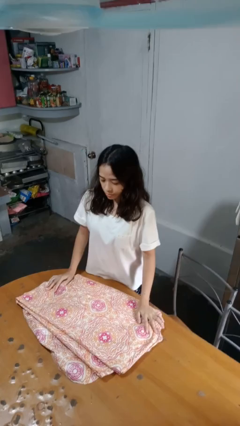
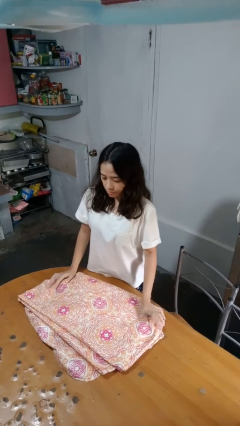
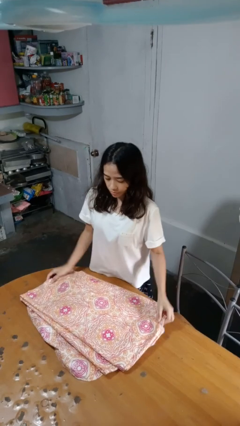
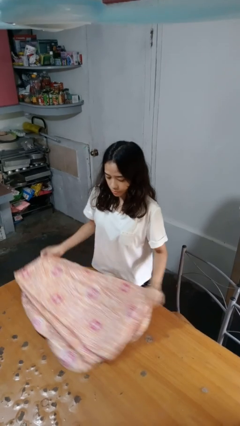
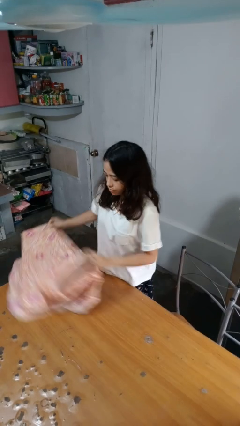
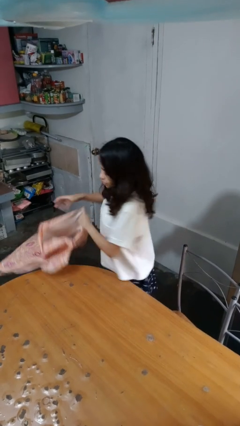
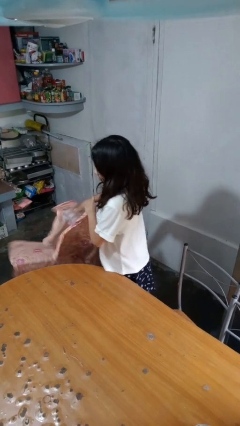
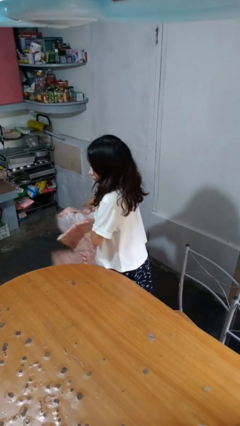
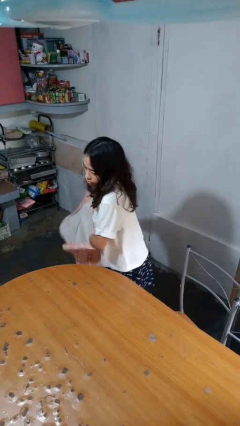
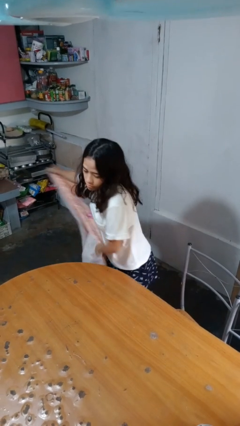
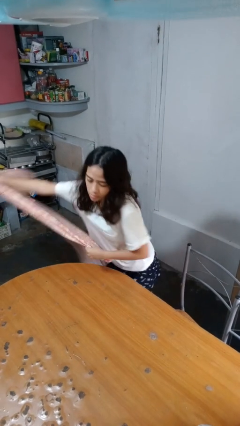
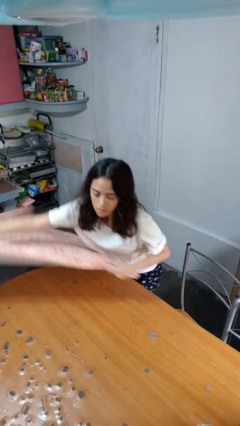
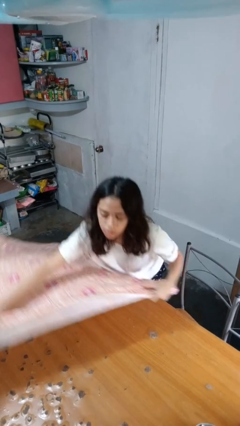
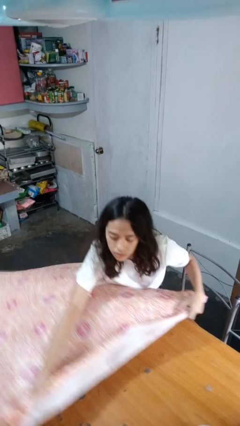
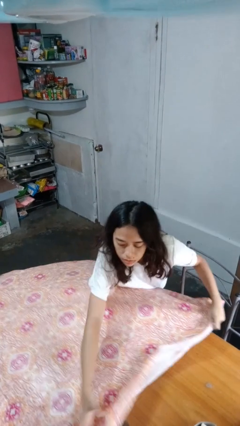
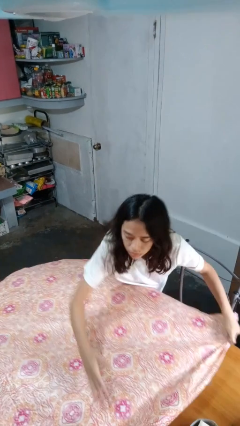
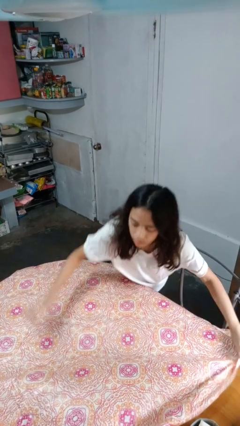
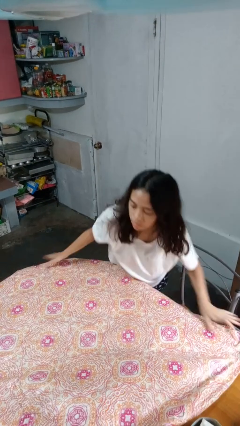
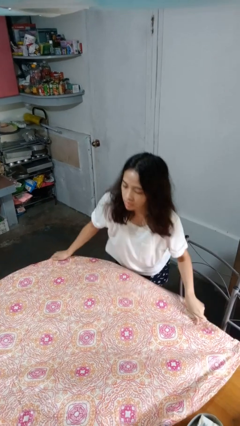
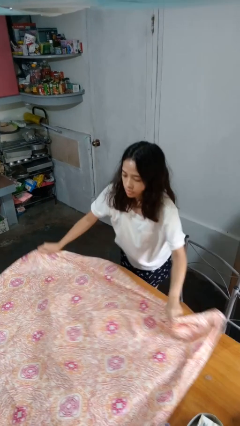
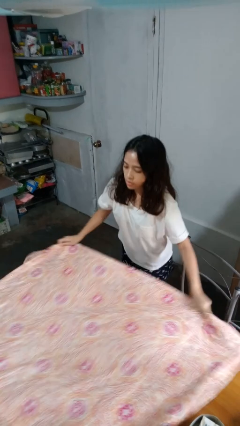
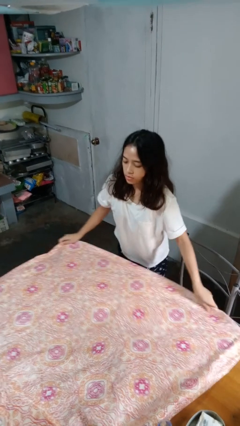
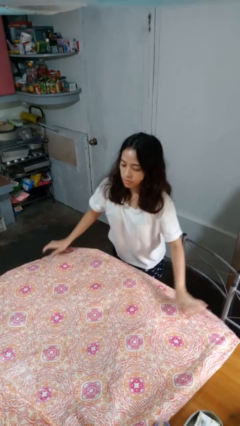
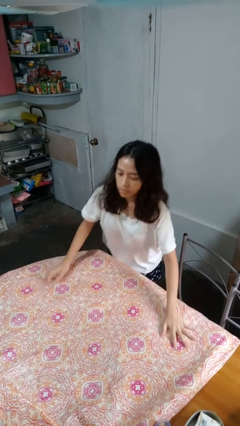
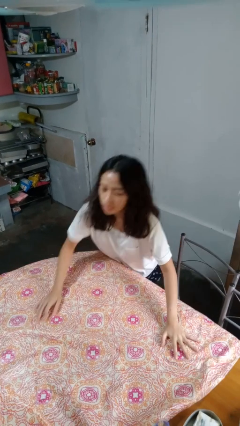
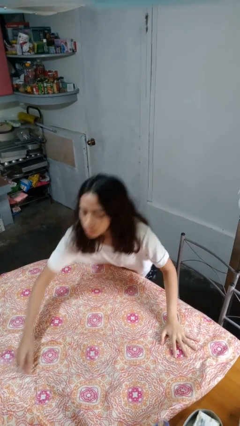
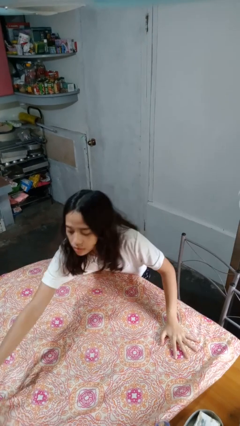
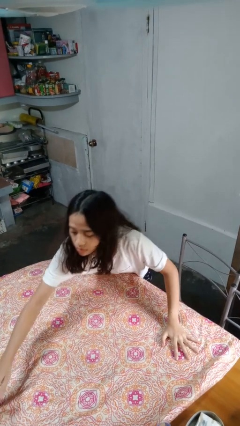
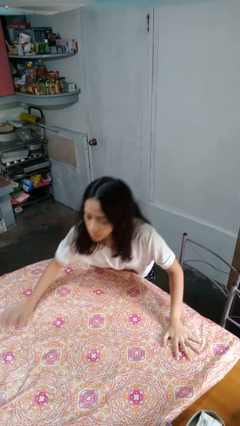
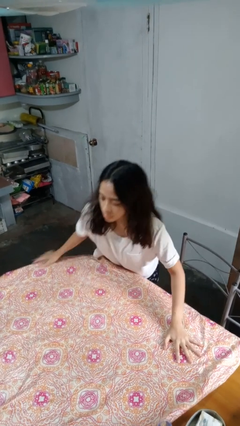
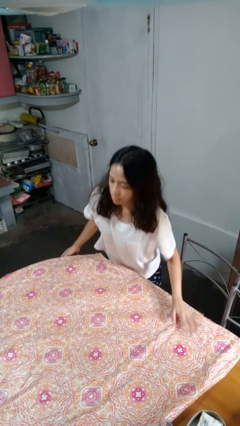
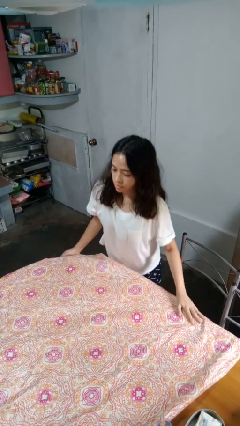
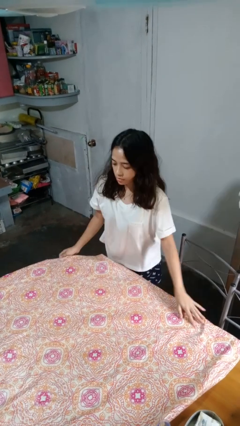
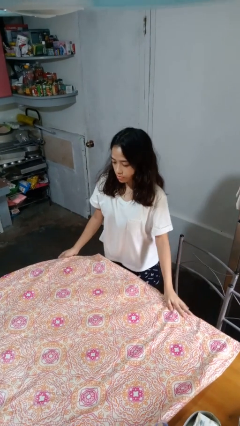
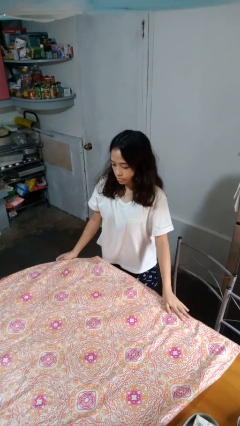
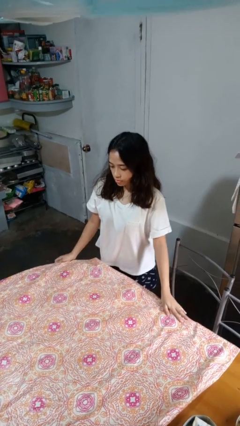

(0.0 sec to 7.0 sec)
person spreads tablecloth

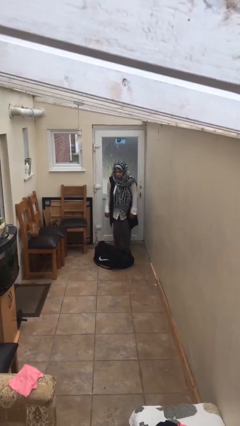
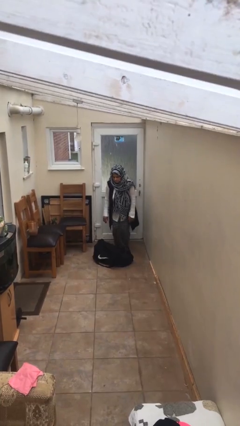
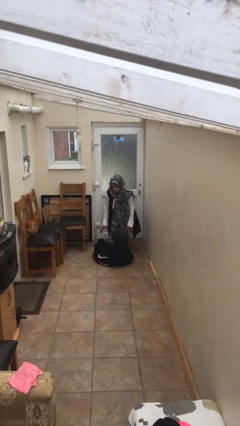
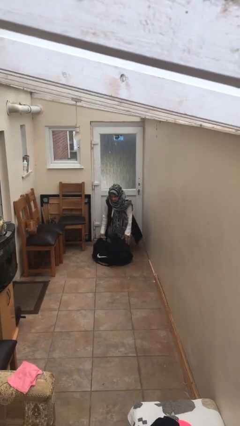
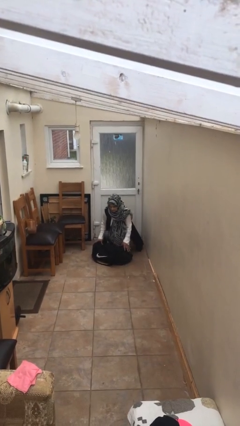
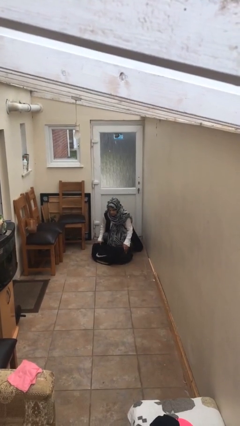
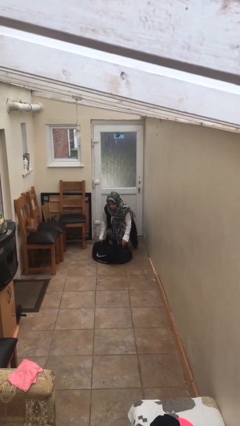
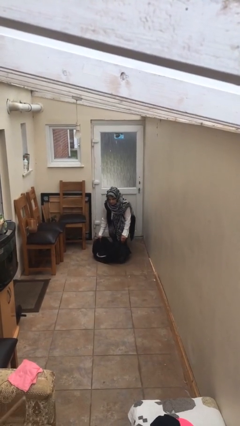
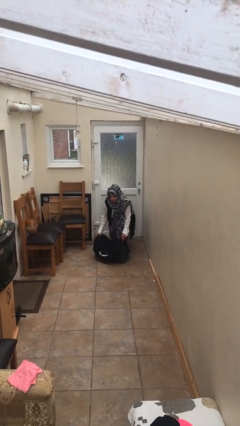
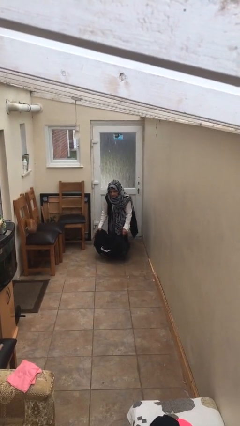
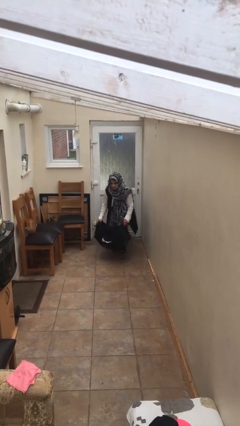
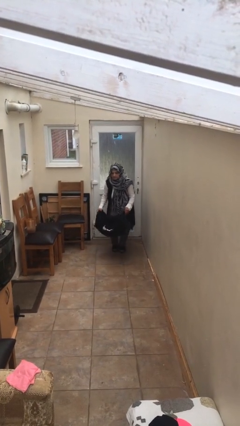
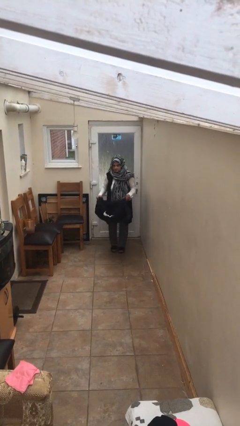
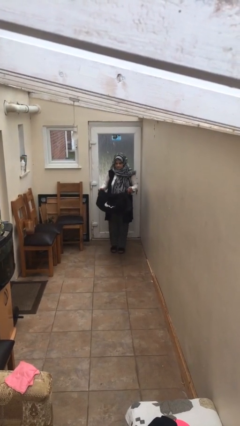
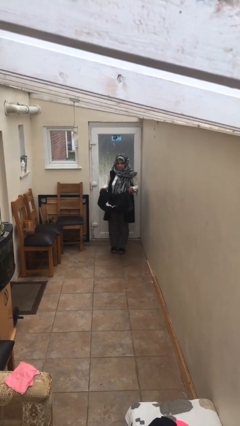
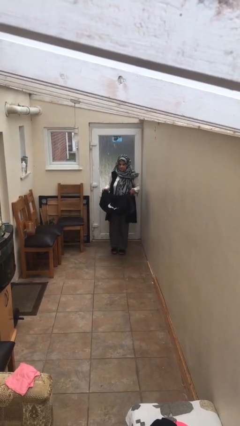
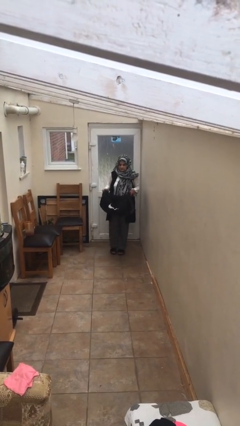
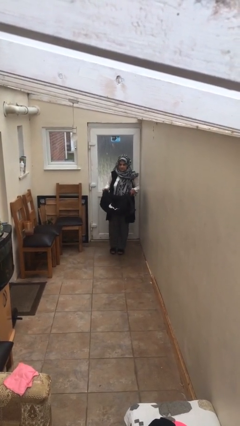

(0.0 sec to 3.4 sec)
person picks up object from floor

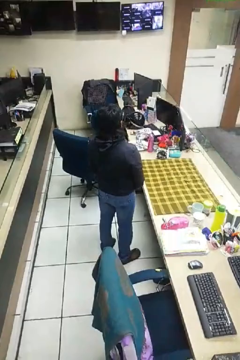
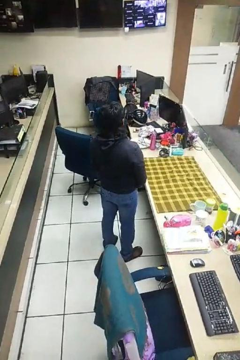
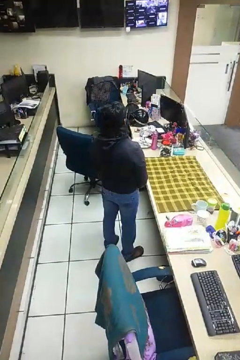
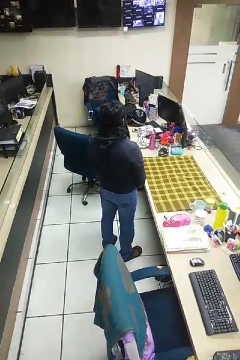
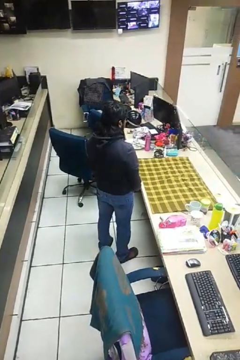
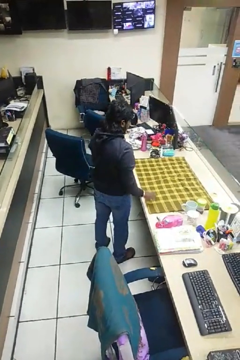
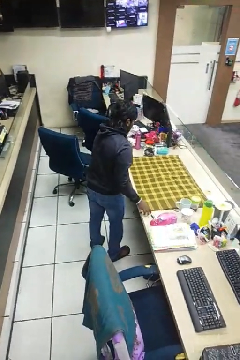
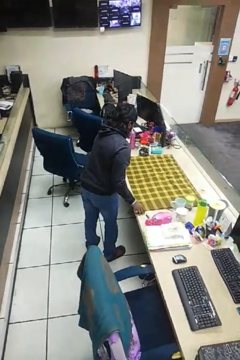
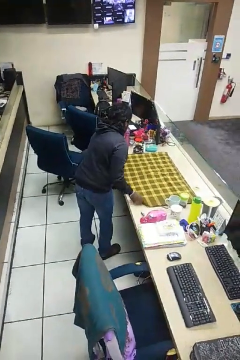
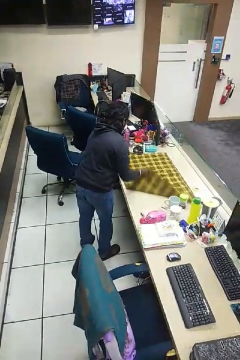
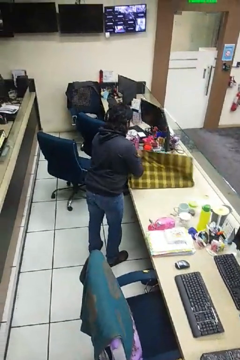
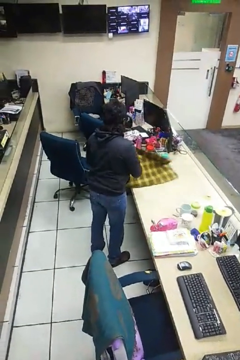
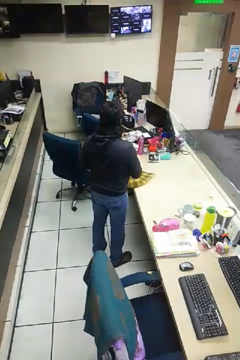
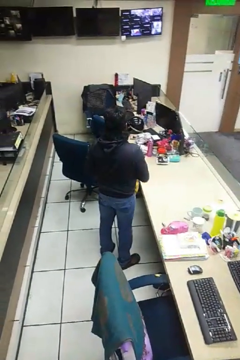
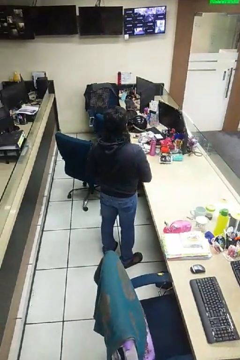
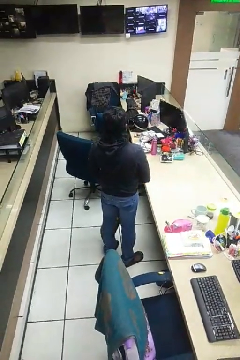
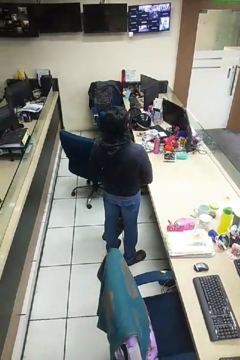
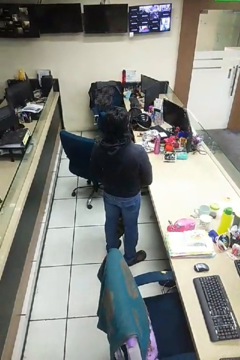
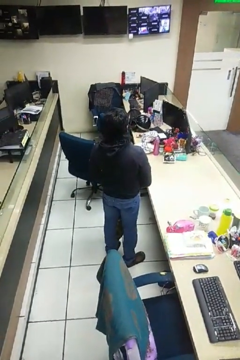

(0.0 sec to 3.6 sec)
person folds tablecloth

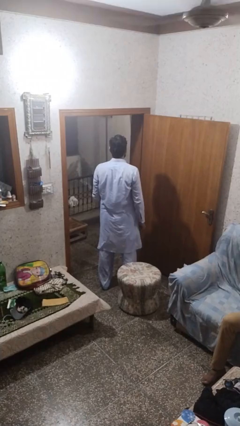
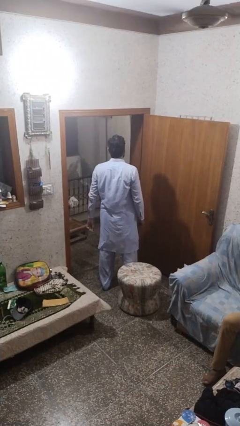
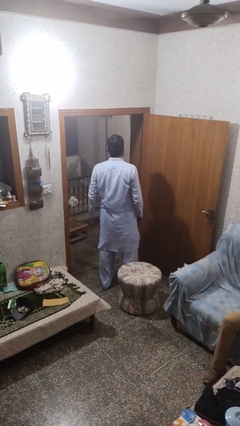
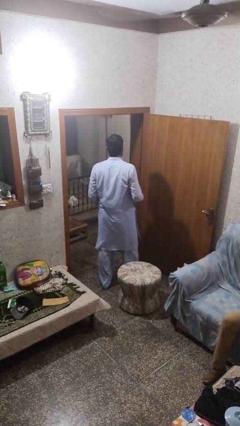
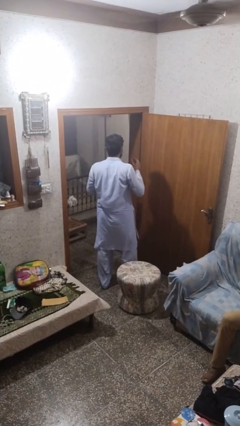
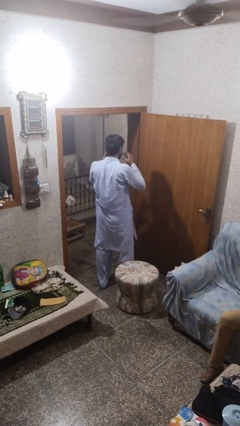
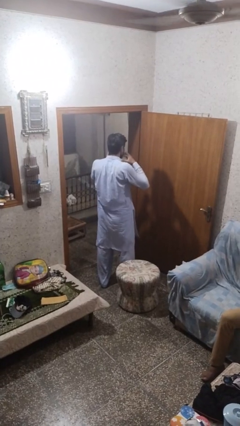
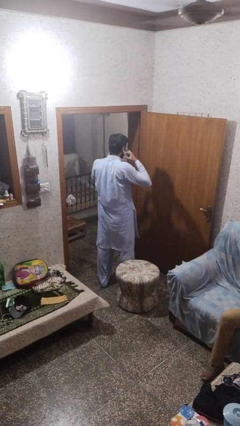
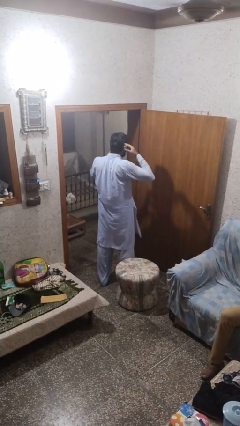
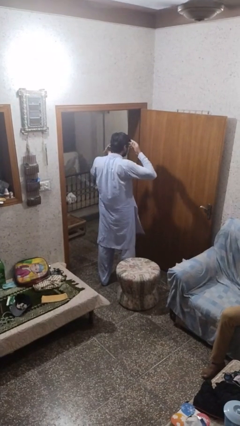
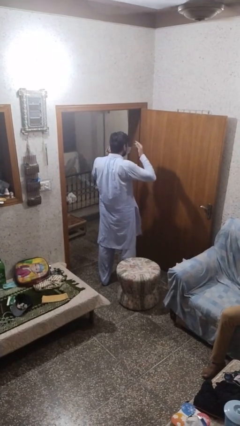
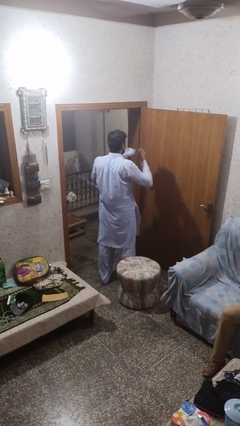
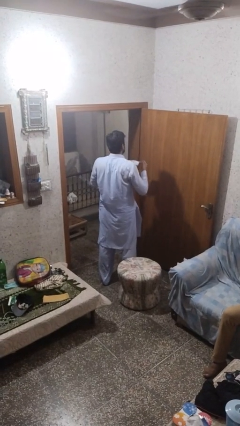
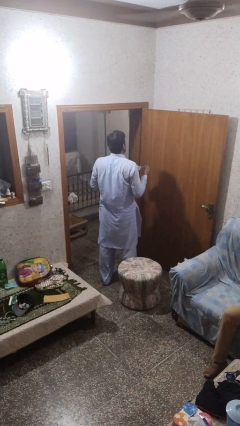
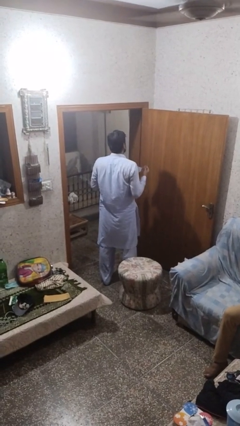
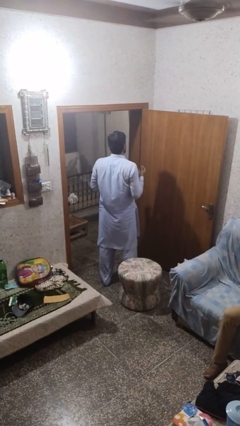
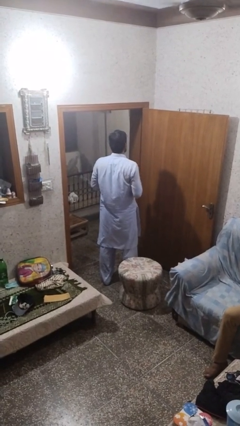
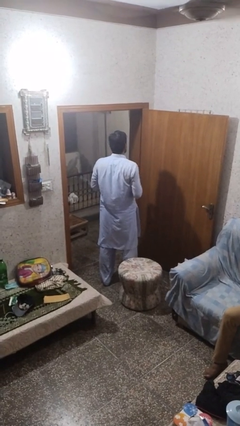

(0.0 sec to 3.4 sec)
person takes off facemask

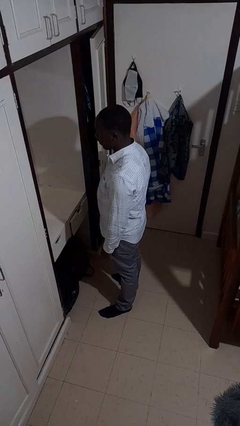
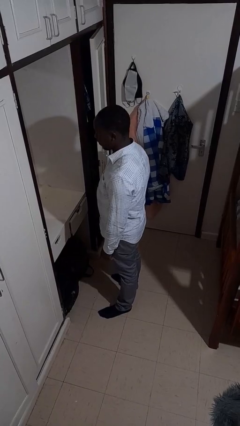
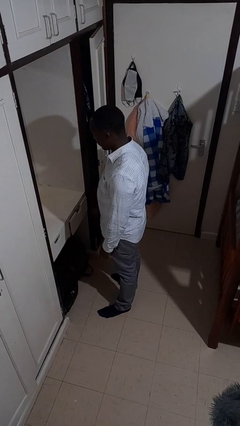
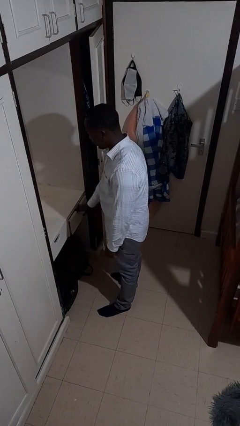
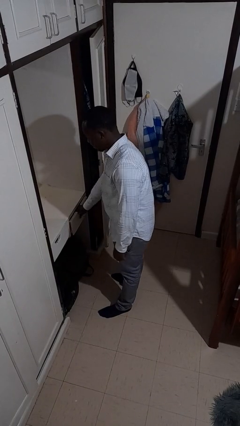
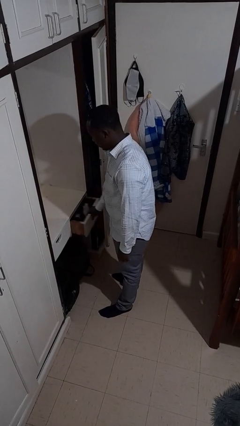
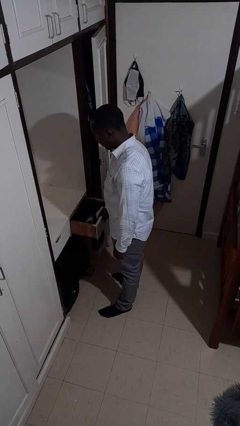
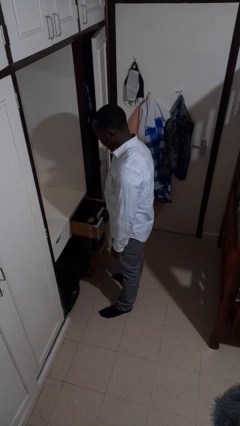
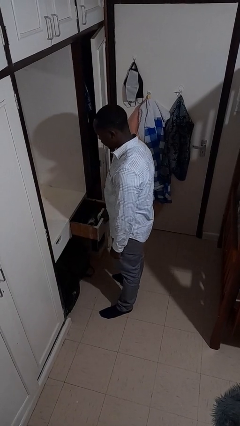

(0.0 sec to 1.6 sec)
person opens dresser drawer
